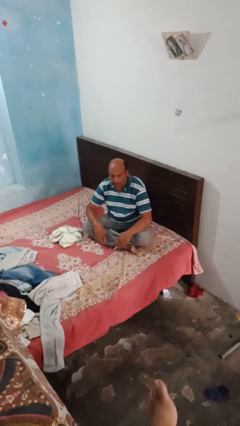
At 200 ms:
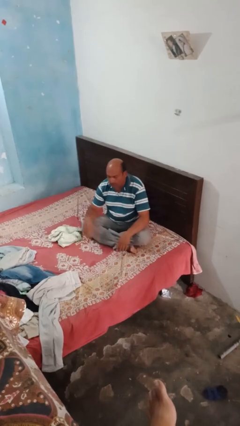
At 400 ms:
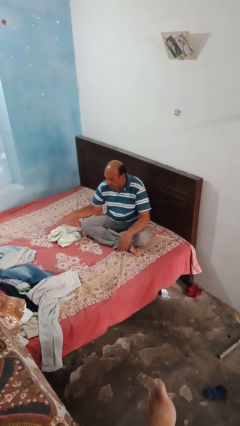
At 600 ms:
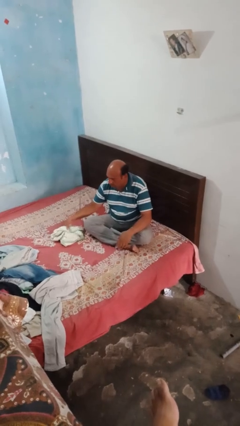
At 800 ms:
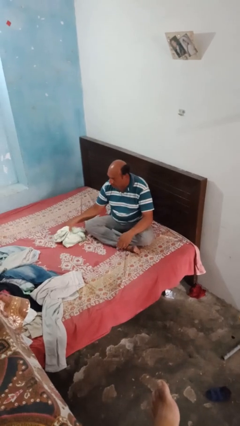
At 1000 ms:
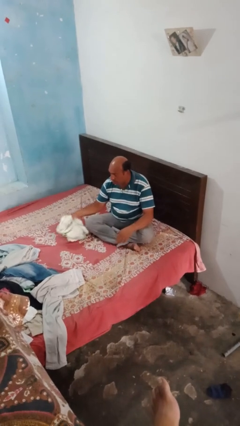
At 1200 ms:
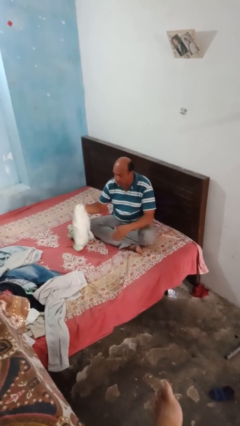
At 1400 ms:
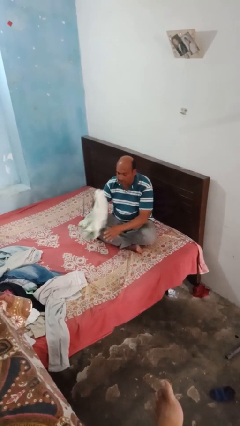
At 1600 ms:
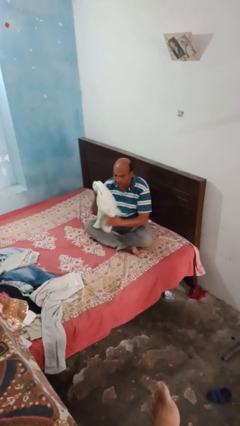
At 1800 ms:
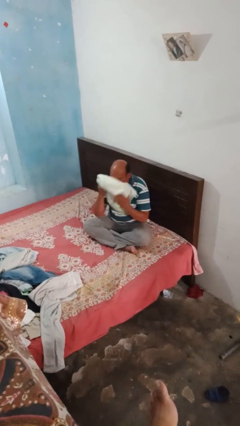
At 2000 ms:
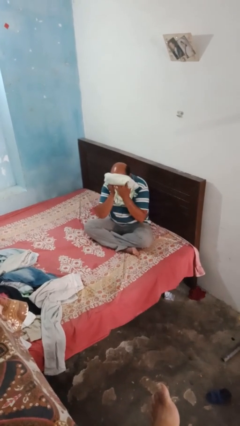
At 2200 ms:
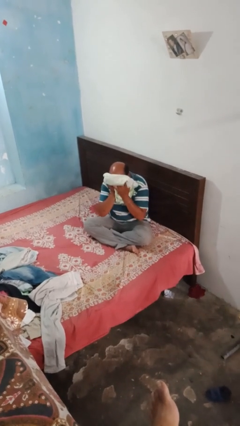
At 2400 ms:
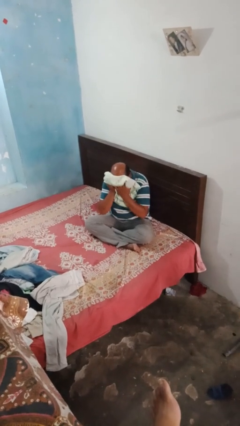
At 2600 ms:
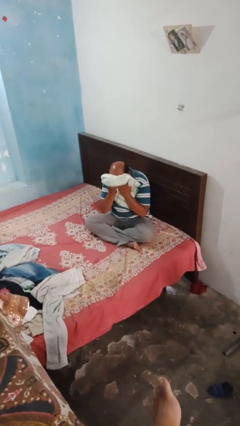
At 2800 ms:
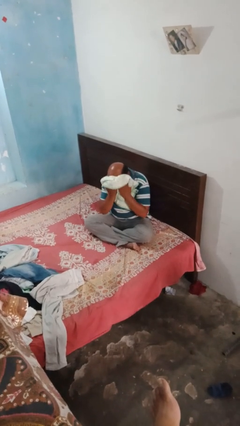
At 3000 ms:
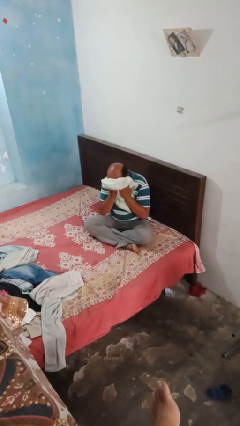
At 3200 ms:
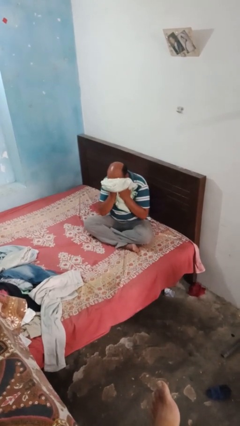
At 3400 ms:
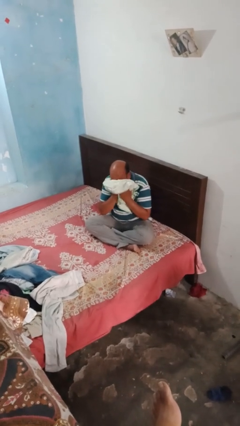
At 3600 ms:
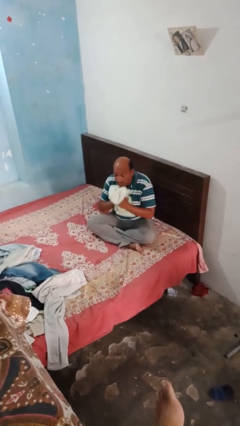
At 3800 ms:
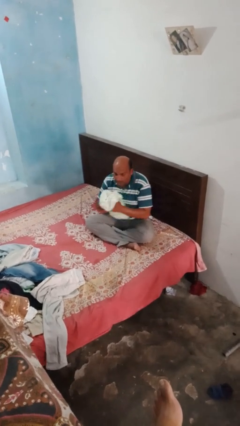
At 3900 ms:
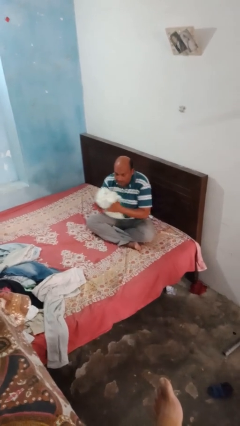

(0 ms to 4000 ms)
person wipes mouth with napkin

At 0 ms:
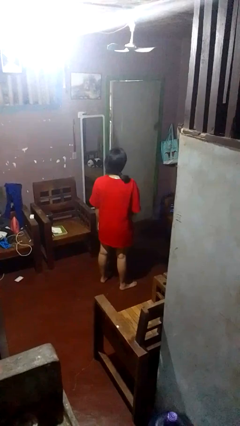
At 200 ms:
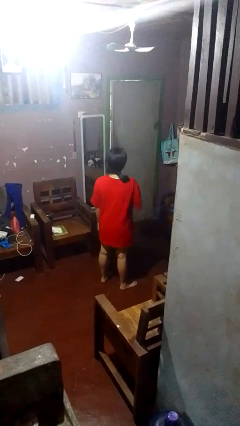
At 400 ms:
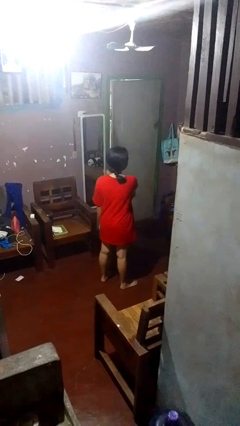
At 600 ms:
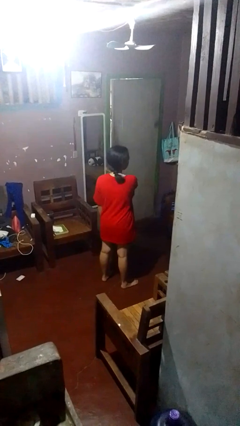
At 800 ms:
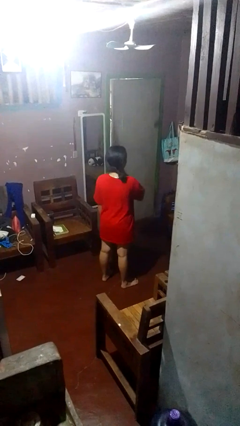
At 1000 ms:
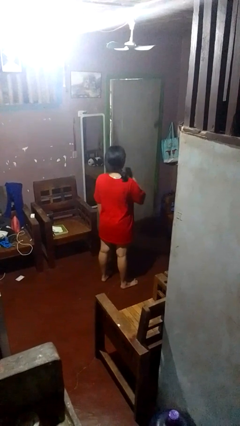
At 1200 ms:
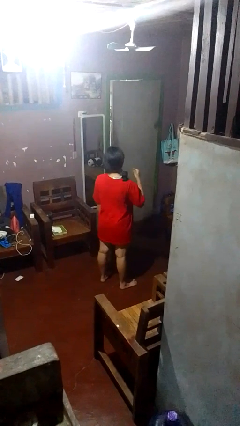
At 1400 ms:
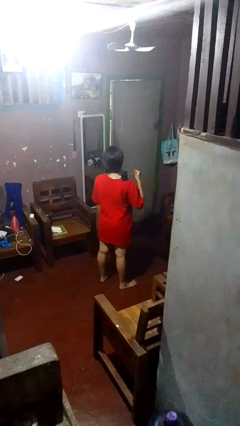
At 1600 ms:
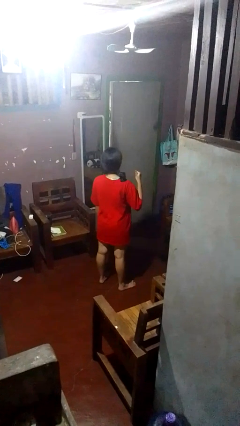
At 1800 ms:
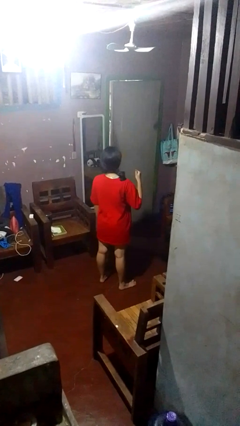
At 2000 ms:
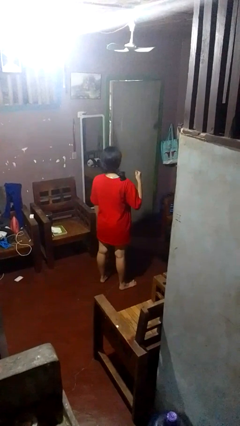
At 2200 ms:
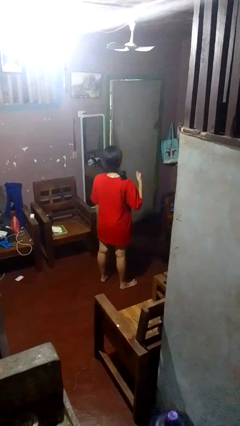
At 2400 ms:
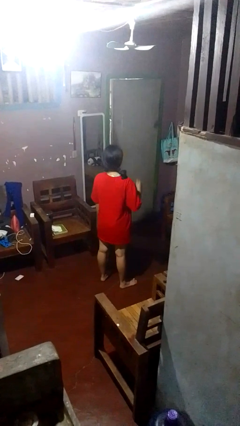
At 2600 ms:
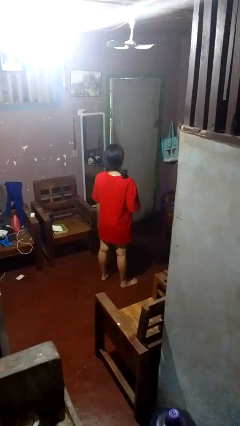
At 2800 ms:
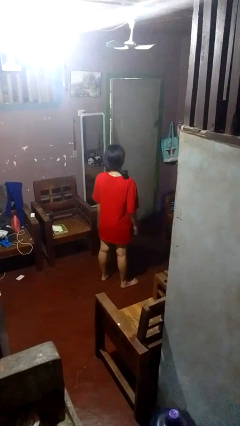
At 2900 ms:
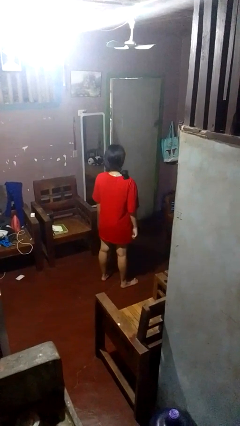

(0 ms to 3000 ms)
person gestures cut

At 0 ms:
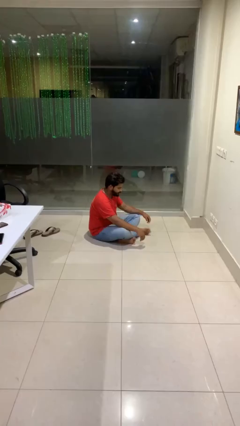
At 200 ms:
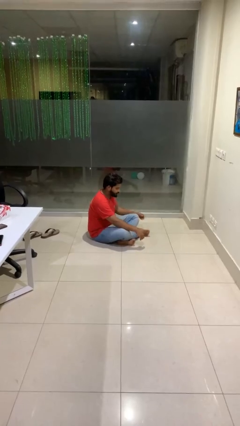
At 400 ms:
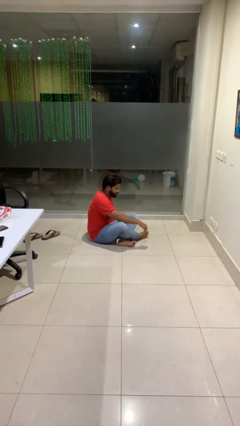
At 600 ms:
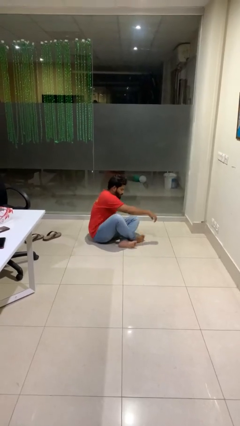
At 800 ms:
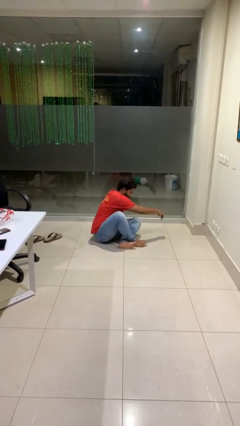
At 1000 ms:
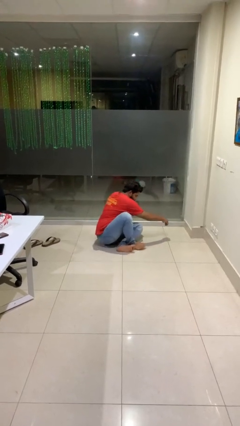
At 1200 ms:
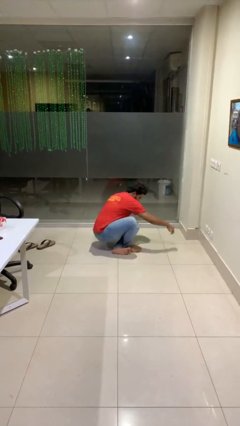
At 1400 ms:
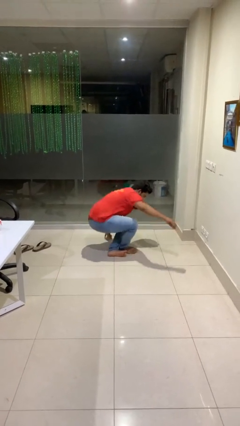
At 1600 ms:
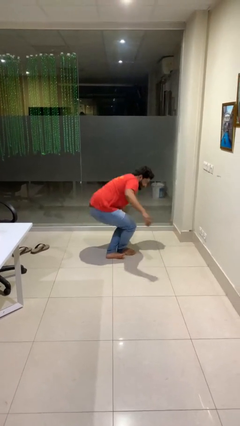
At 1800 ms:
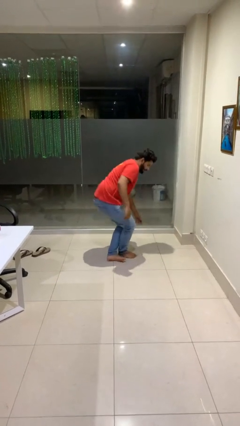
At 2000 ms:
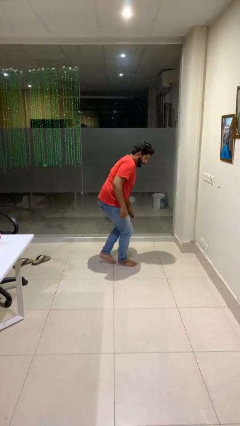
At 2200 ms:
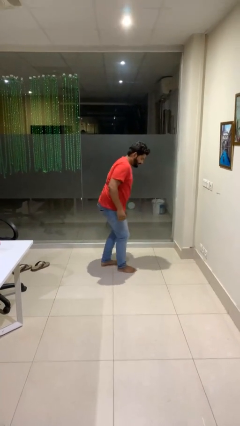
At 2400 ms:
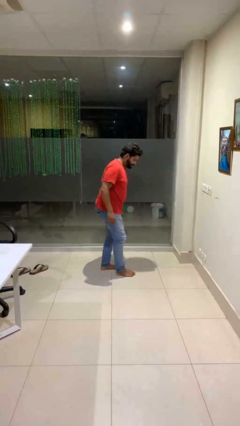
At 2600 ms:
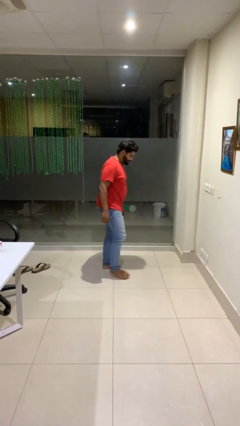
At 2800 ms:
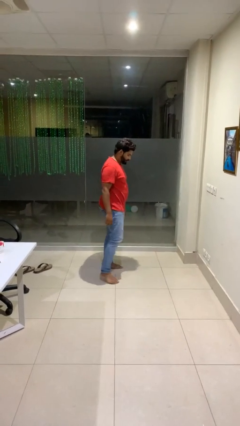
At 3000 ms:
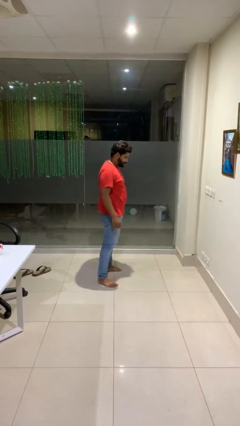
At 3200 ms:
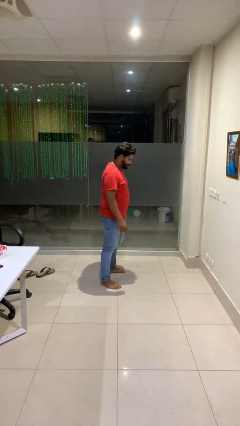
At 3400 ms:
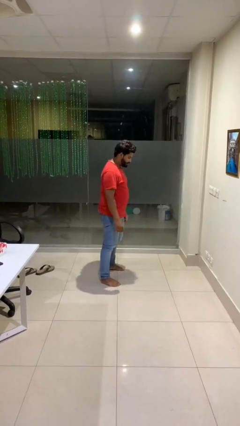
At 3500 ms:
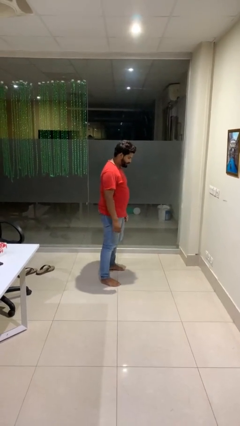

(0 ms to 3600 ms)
person stands up from floor

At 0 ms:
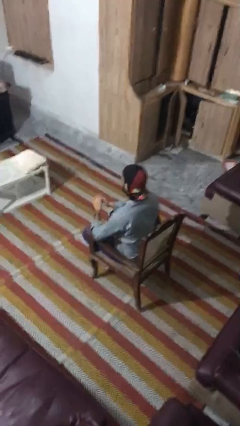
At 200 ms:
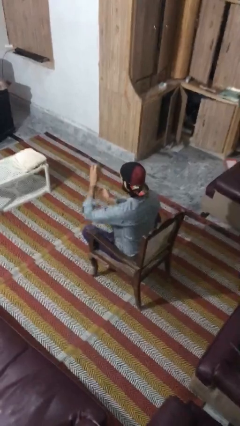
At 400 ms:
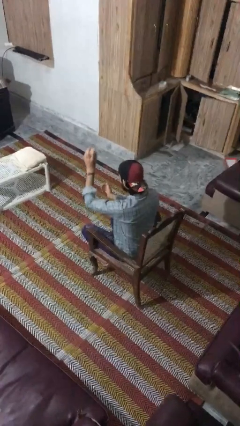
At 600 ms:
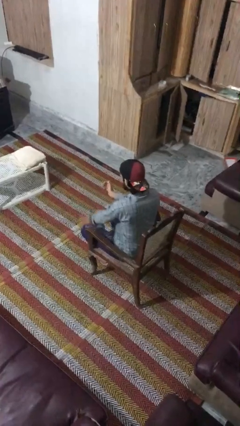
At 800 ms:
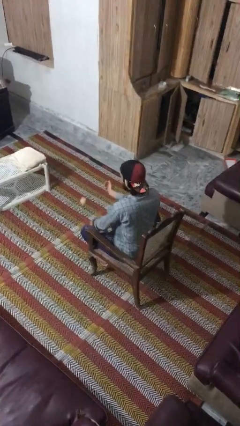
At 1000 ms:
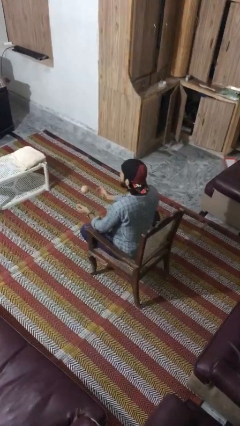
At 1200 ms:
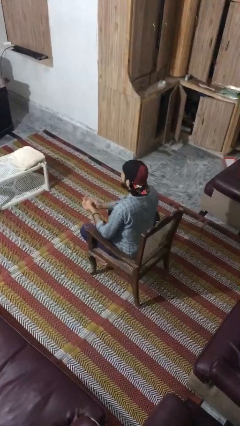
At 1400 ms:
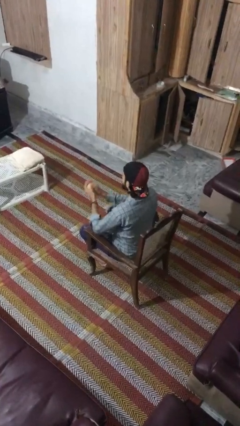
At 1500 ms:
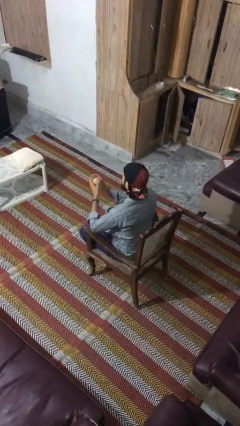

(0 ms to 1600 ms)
person bounces ball on floor

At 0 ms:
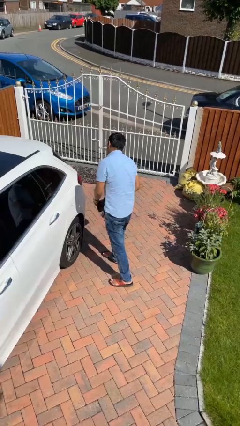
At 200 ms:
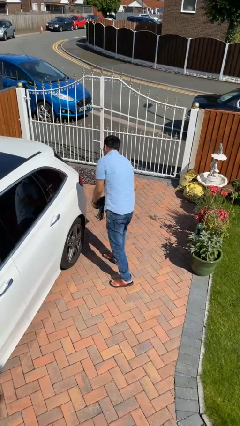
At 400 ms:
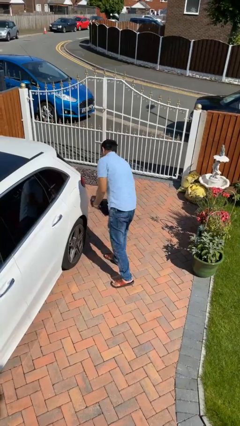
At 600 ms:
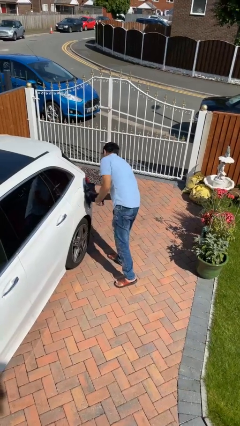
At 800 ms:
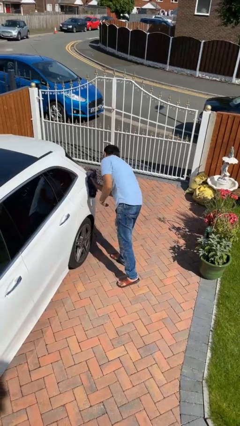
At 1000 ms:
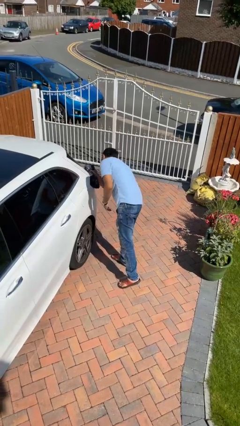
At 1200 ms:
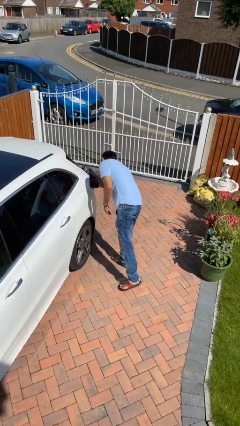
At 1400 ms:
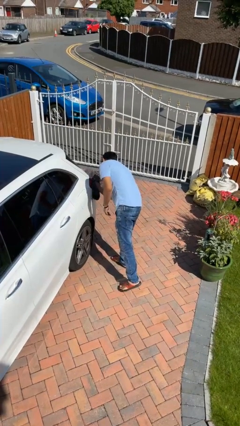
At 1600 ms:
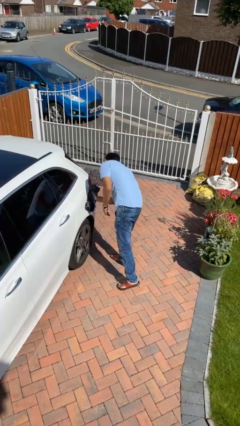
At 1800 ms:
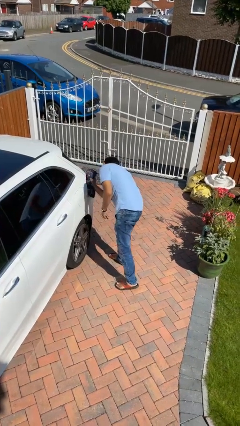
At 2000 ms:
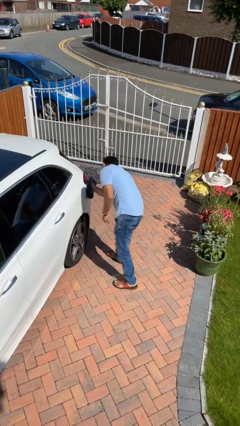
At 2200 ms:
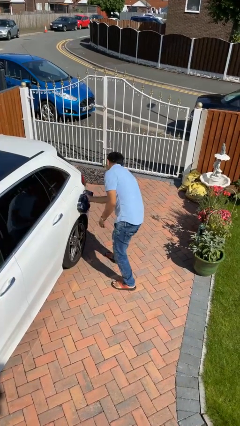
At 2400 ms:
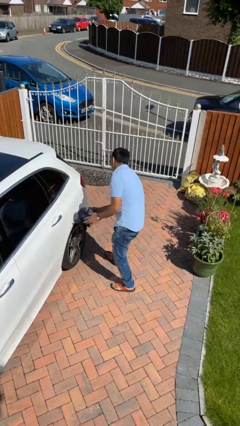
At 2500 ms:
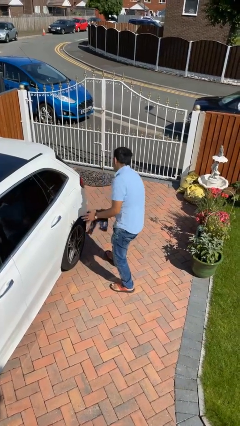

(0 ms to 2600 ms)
person polishes car with rag

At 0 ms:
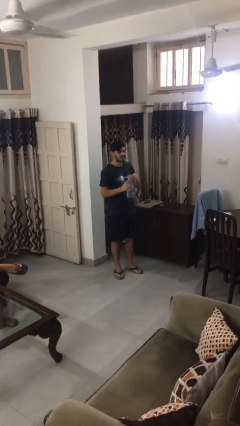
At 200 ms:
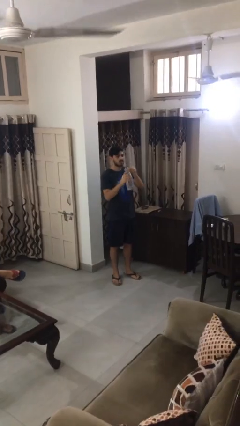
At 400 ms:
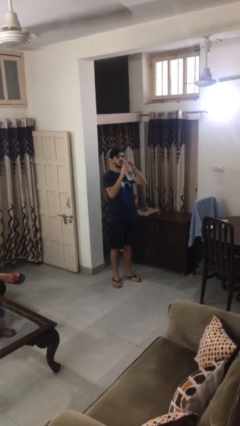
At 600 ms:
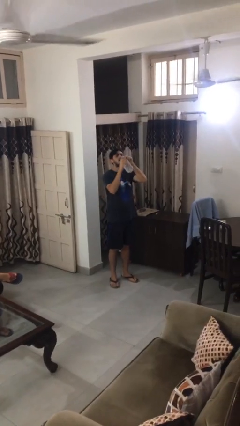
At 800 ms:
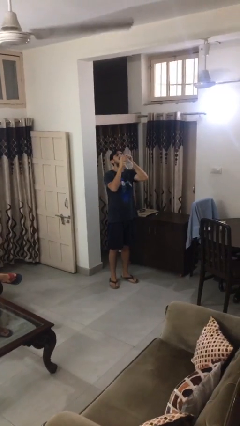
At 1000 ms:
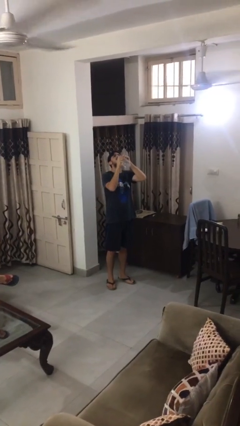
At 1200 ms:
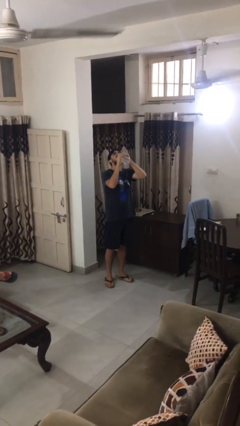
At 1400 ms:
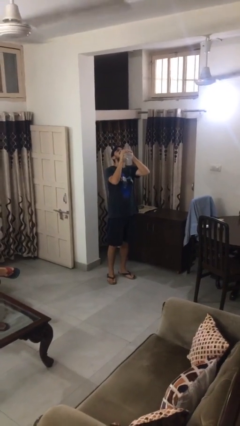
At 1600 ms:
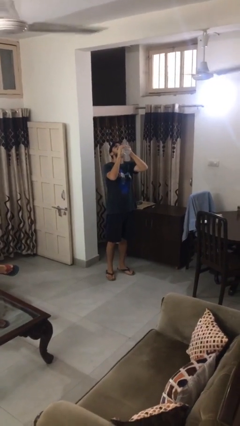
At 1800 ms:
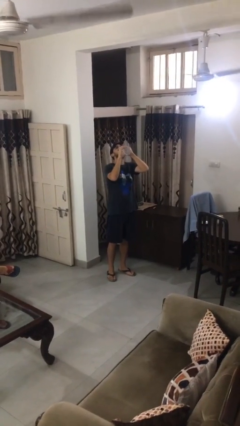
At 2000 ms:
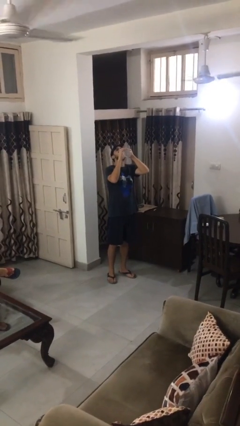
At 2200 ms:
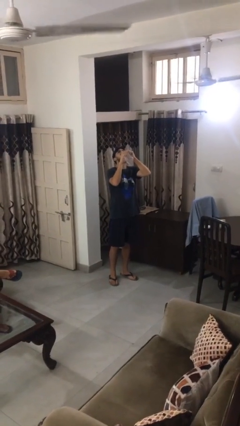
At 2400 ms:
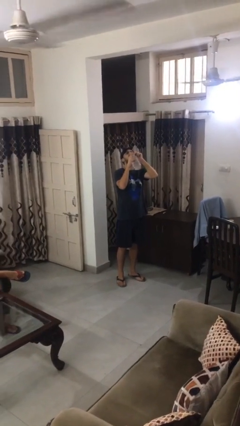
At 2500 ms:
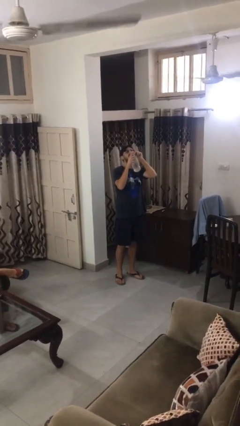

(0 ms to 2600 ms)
person drinks from bottle

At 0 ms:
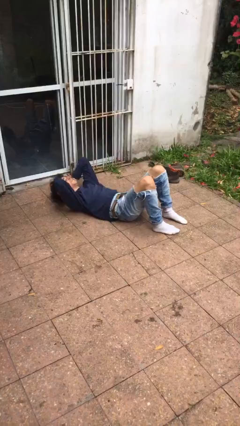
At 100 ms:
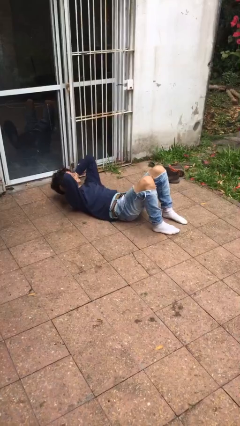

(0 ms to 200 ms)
person exercises with situp
